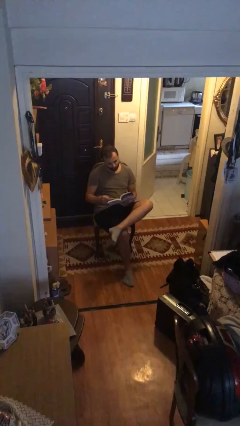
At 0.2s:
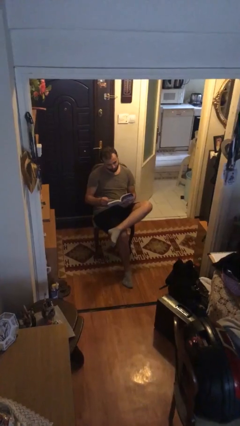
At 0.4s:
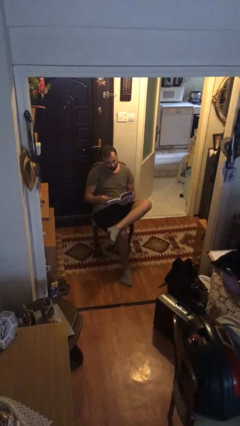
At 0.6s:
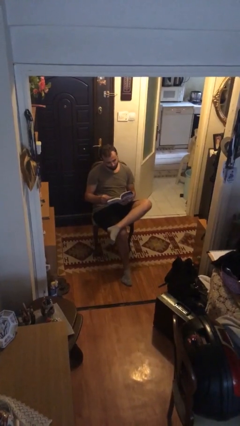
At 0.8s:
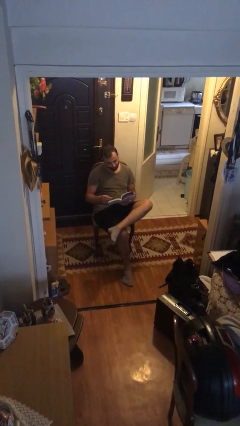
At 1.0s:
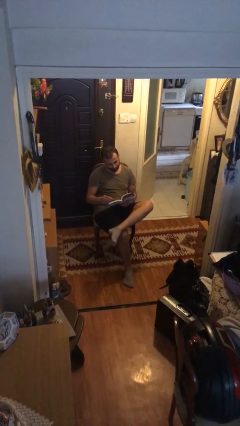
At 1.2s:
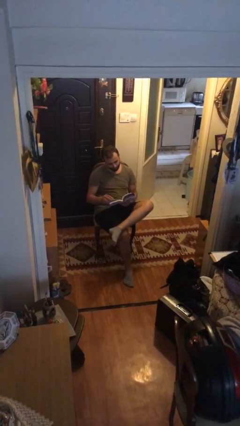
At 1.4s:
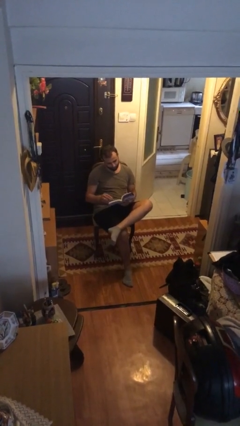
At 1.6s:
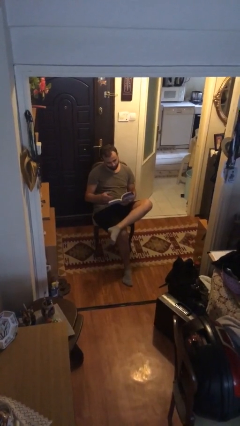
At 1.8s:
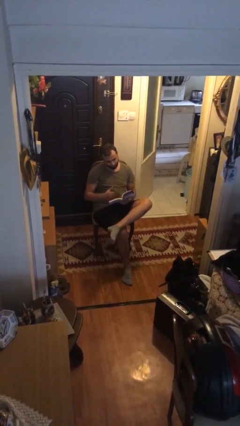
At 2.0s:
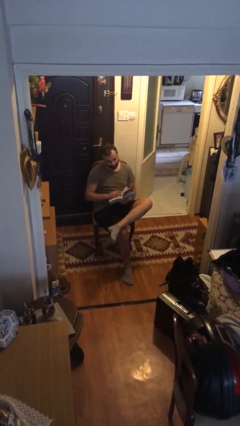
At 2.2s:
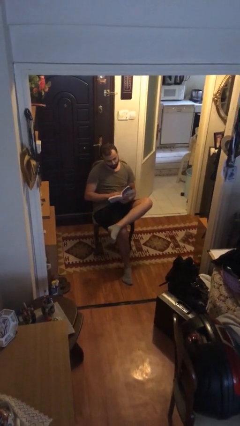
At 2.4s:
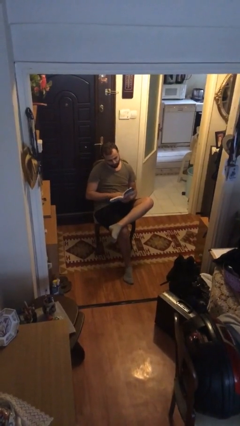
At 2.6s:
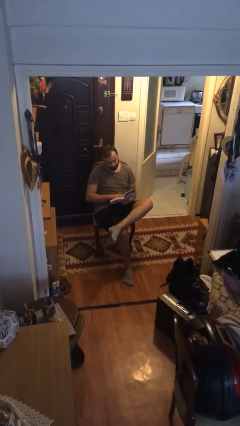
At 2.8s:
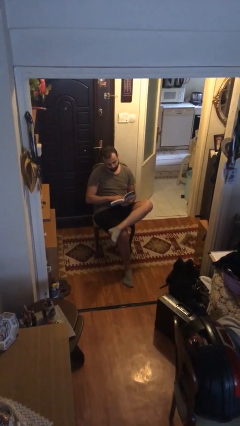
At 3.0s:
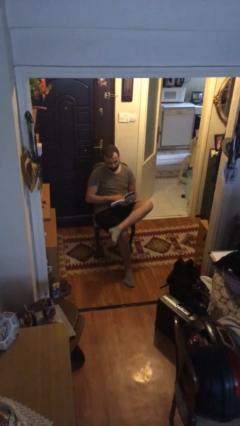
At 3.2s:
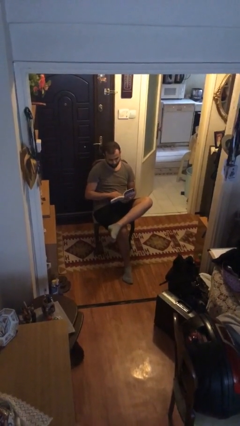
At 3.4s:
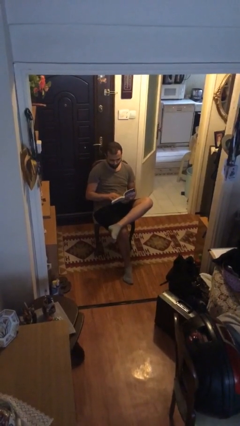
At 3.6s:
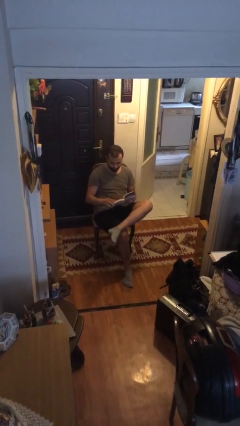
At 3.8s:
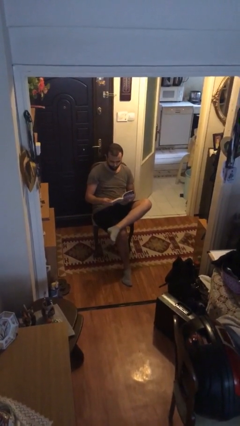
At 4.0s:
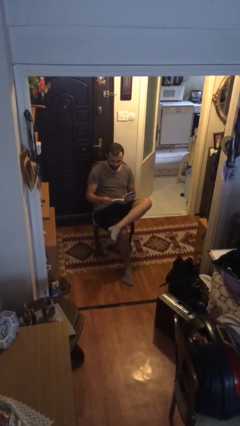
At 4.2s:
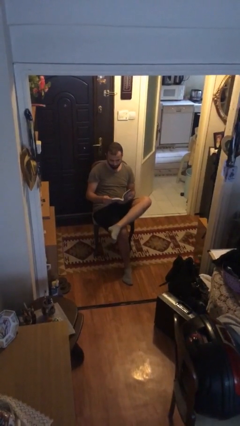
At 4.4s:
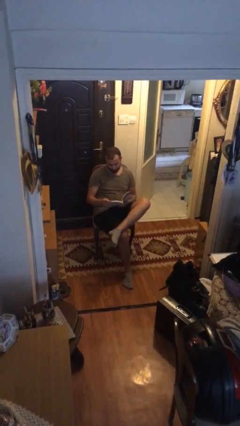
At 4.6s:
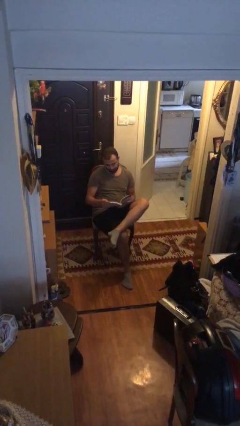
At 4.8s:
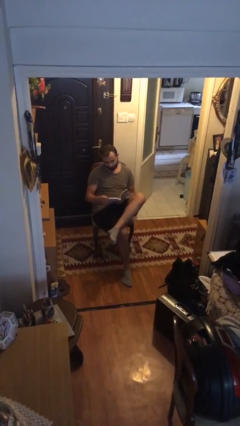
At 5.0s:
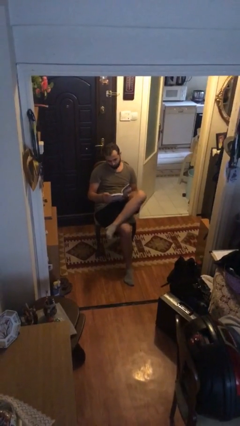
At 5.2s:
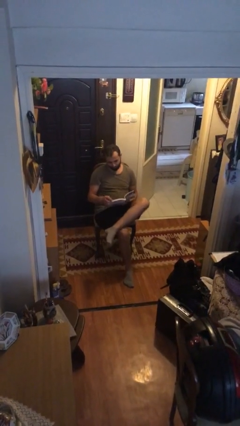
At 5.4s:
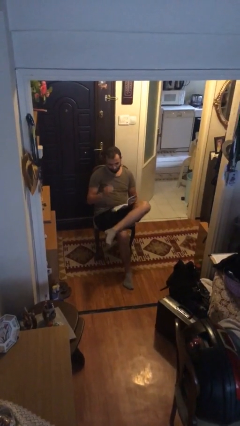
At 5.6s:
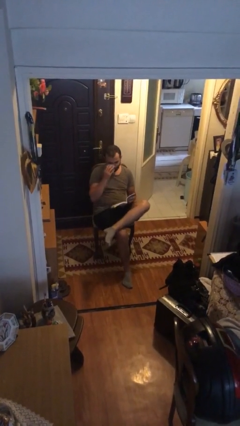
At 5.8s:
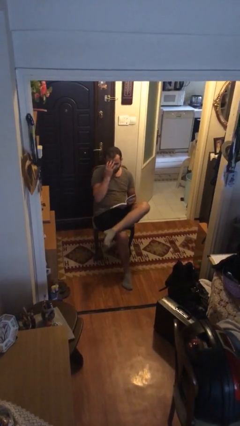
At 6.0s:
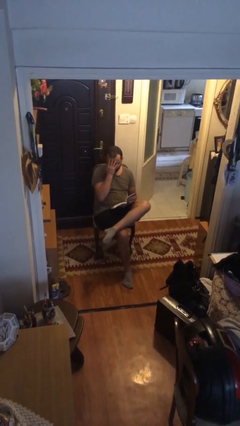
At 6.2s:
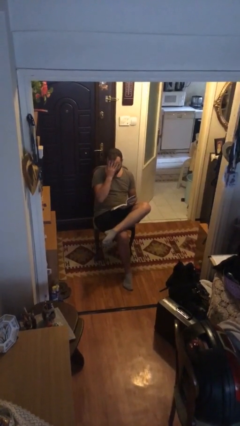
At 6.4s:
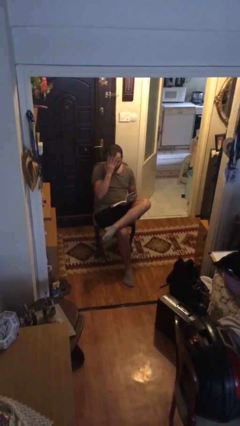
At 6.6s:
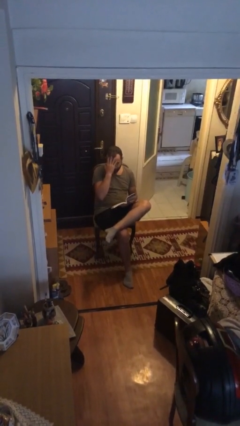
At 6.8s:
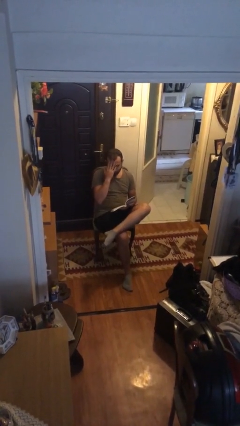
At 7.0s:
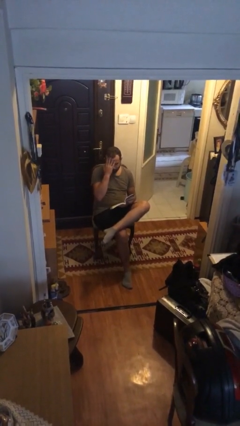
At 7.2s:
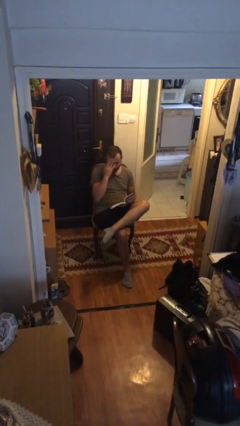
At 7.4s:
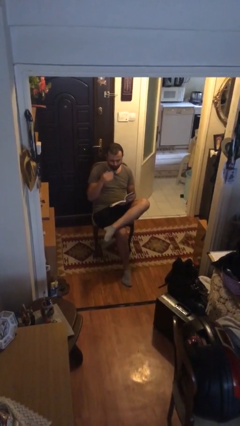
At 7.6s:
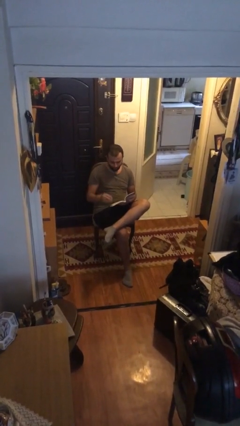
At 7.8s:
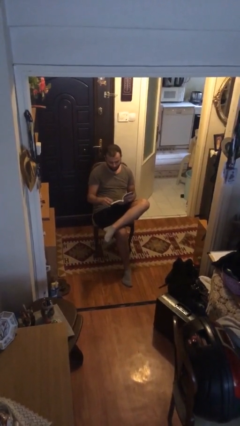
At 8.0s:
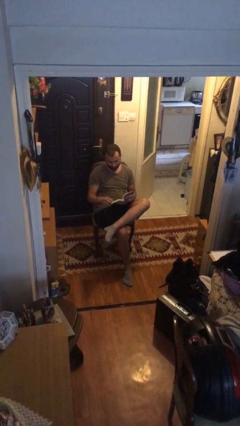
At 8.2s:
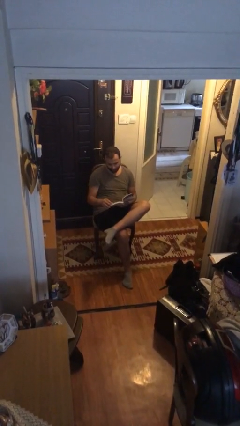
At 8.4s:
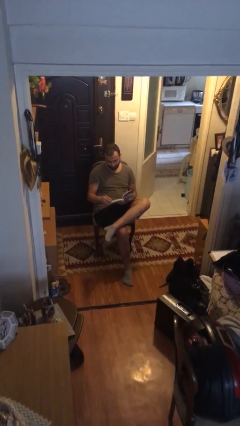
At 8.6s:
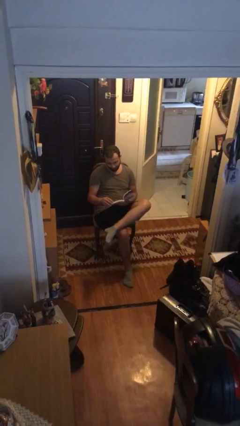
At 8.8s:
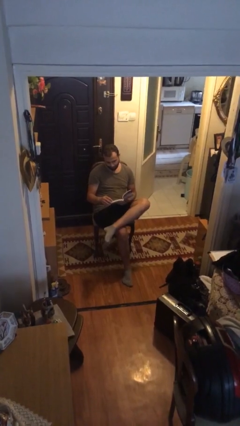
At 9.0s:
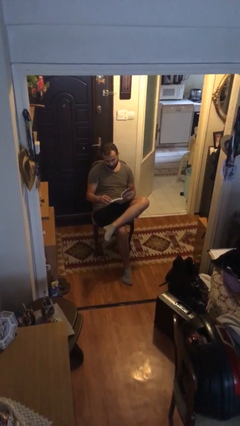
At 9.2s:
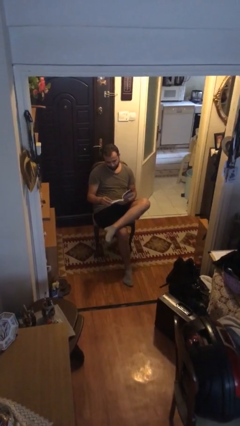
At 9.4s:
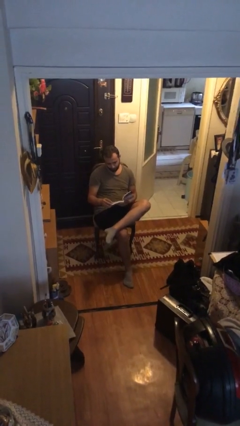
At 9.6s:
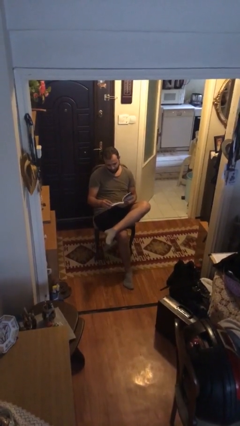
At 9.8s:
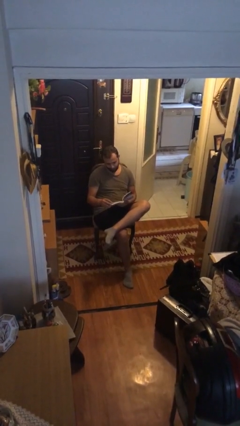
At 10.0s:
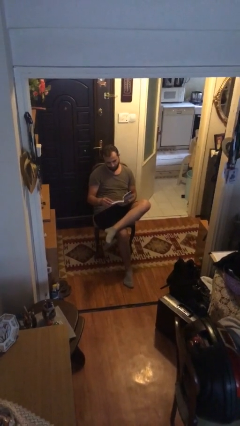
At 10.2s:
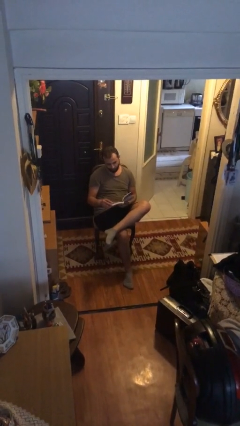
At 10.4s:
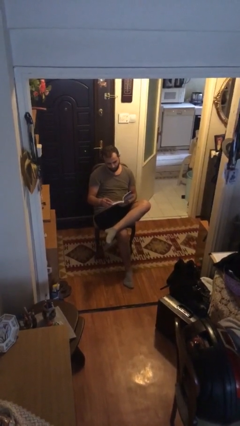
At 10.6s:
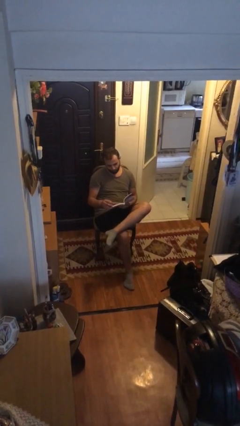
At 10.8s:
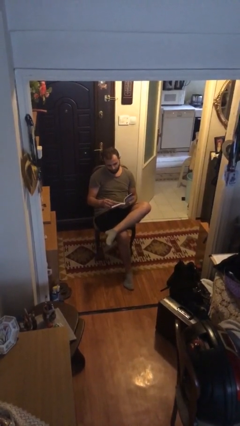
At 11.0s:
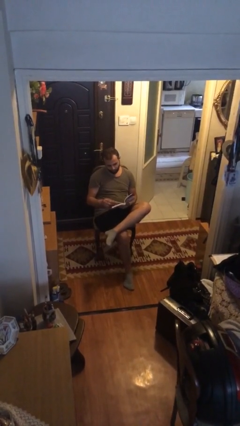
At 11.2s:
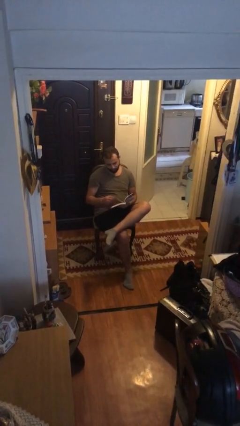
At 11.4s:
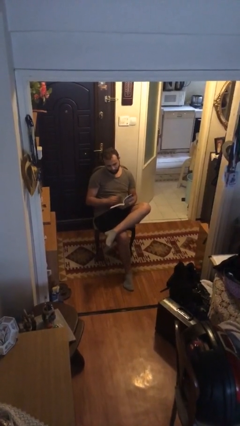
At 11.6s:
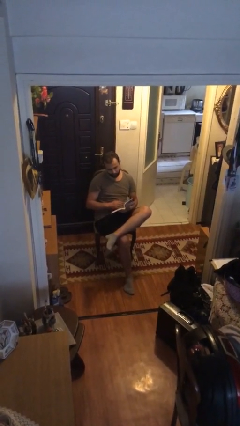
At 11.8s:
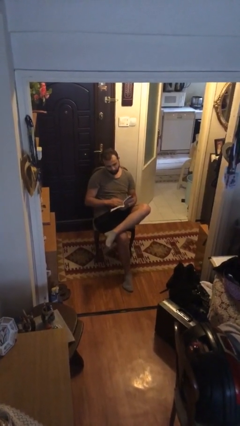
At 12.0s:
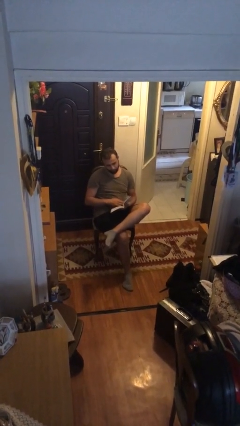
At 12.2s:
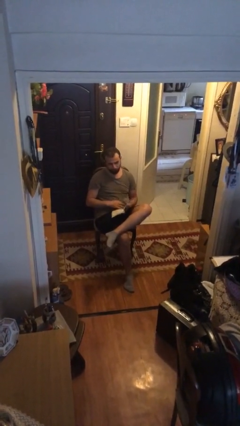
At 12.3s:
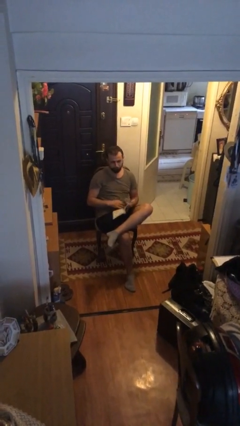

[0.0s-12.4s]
person reads document

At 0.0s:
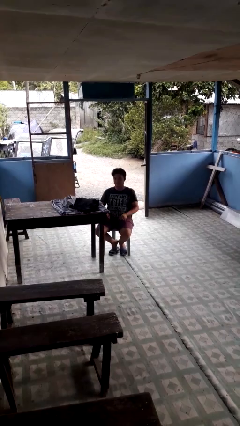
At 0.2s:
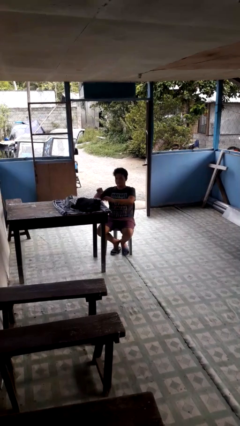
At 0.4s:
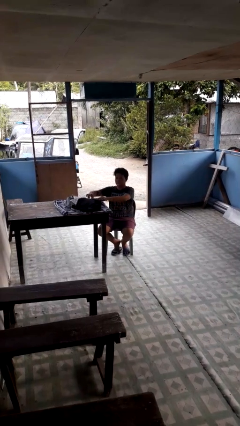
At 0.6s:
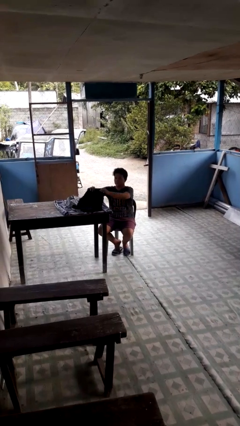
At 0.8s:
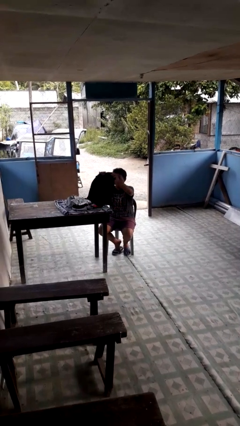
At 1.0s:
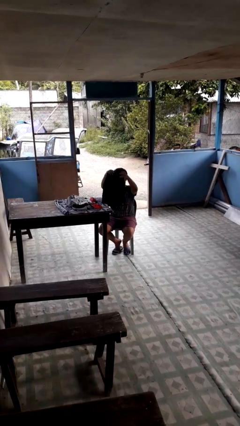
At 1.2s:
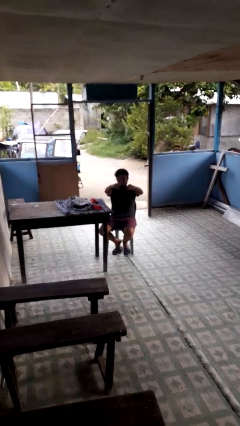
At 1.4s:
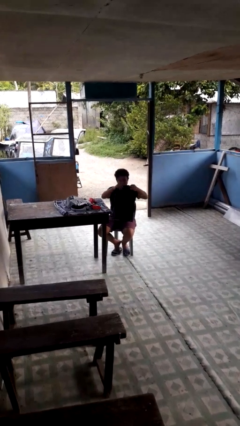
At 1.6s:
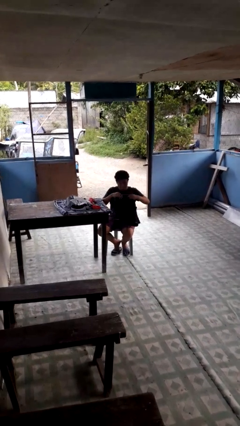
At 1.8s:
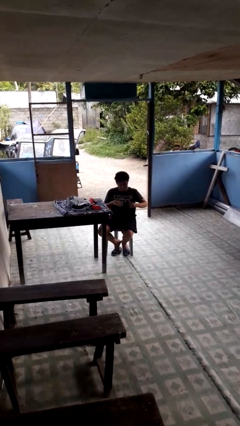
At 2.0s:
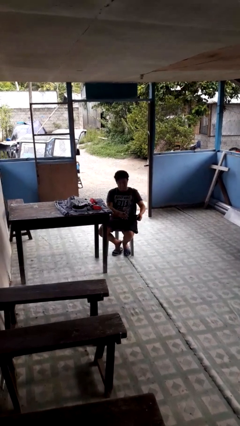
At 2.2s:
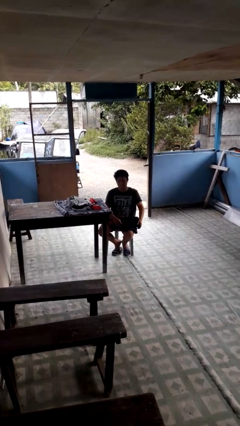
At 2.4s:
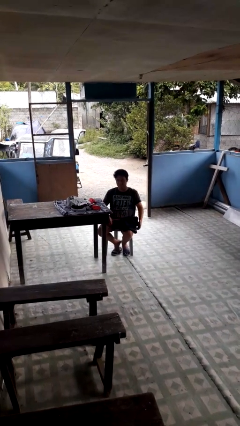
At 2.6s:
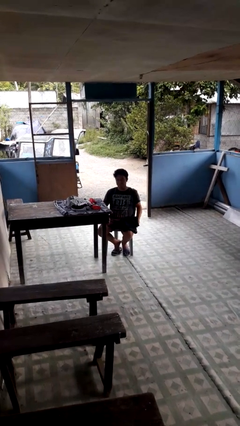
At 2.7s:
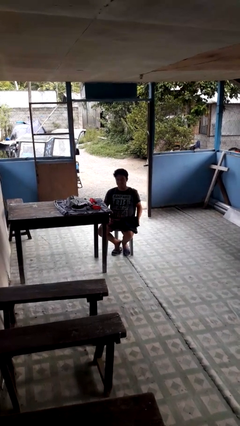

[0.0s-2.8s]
person folds pants

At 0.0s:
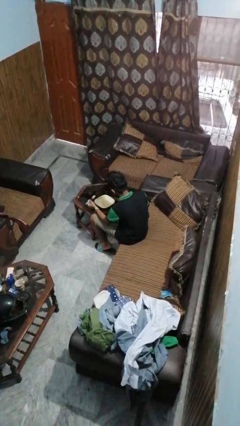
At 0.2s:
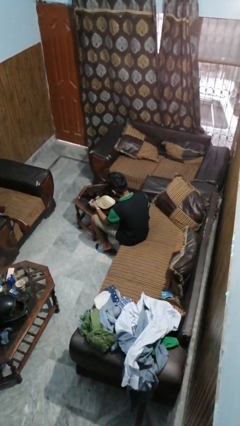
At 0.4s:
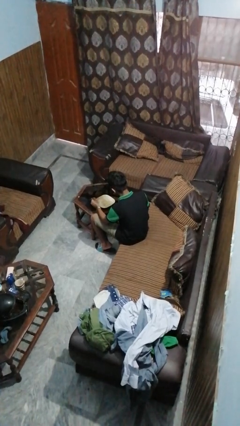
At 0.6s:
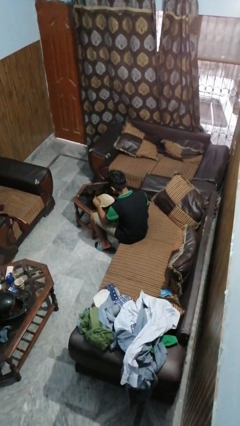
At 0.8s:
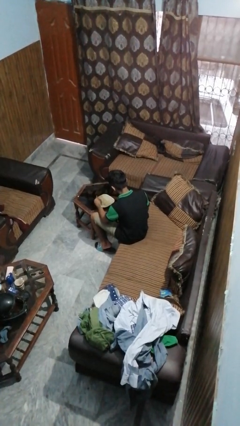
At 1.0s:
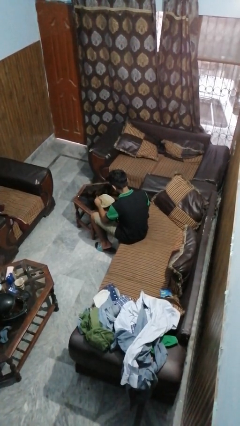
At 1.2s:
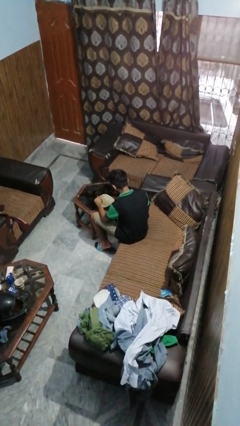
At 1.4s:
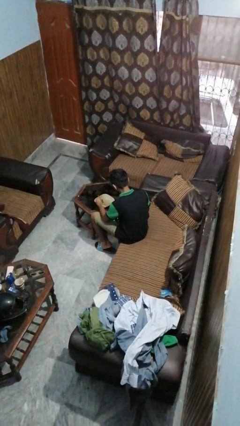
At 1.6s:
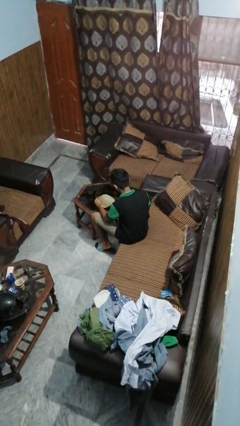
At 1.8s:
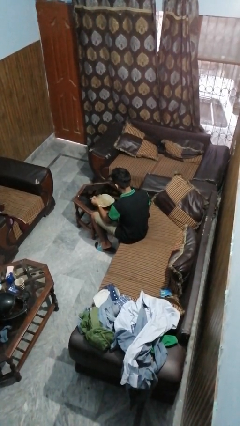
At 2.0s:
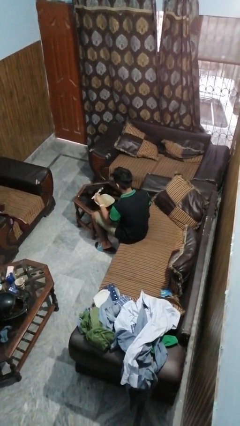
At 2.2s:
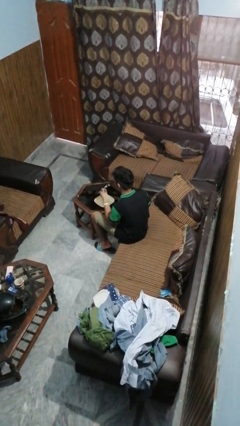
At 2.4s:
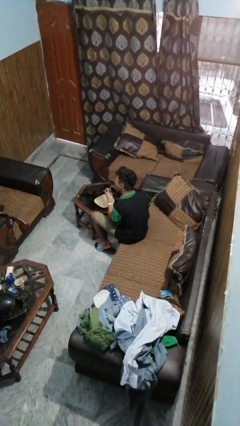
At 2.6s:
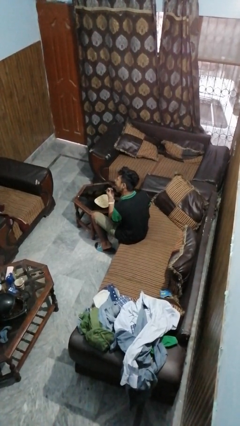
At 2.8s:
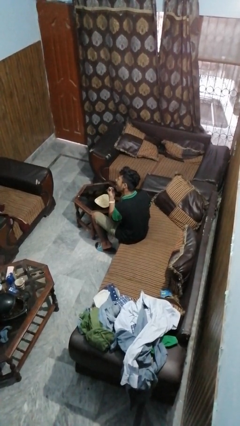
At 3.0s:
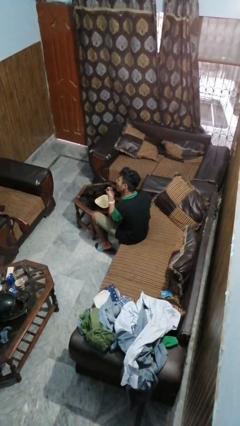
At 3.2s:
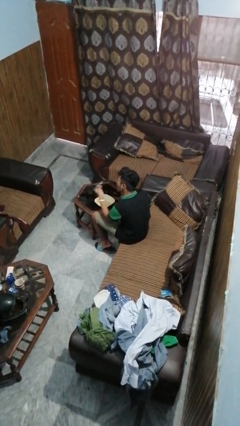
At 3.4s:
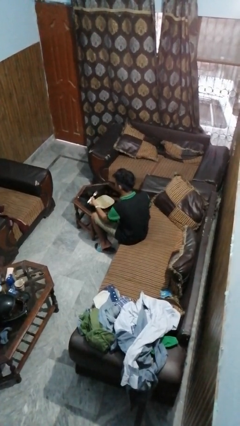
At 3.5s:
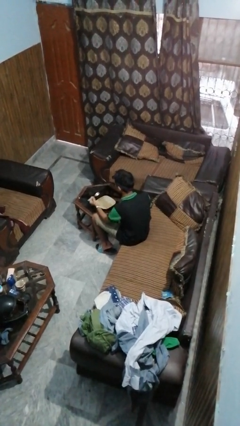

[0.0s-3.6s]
person eats with utensil
